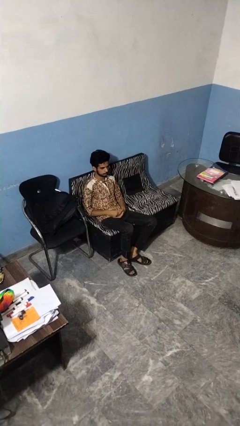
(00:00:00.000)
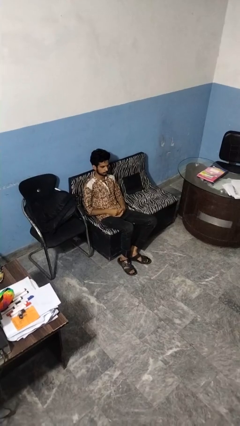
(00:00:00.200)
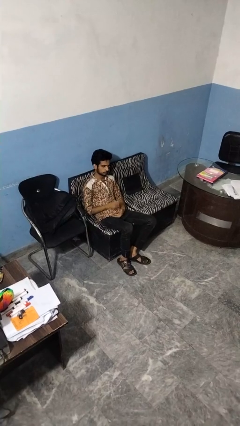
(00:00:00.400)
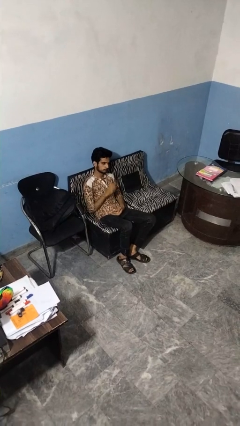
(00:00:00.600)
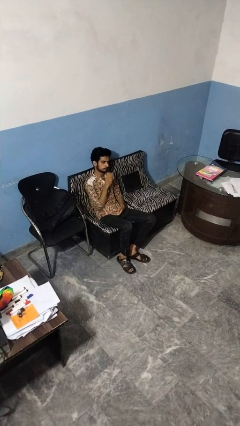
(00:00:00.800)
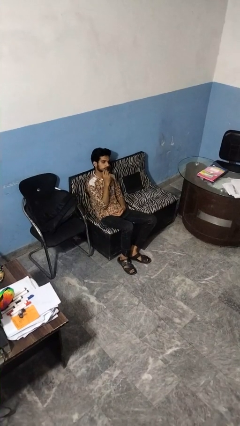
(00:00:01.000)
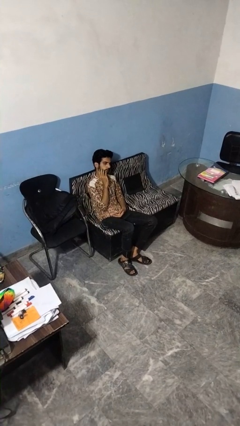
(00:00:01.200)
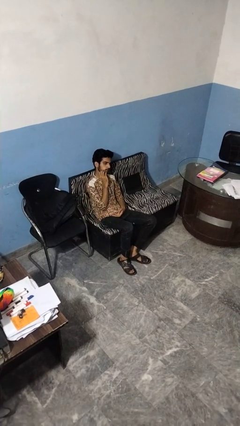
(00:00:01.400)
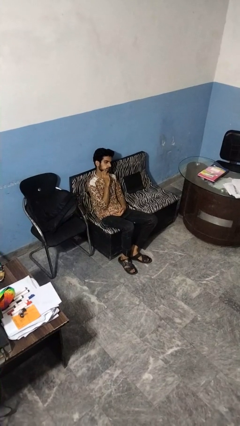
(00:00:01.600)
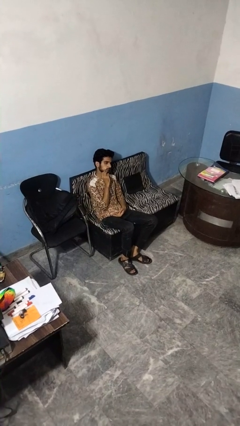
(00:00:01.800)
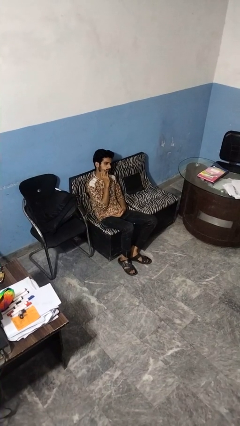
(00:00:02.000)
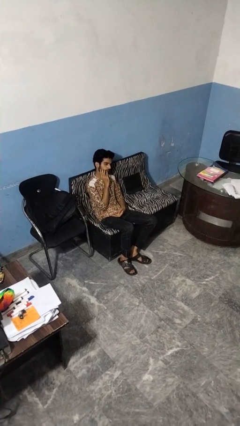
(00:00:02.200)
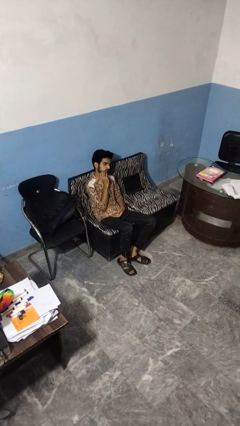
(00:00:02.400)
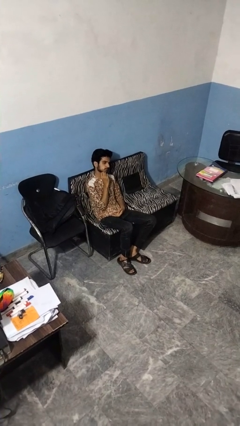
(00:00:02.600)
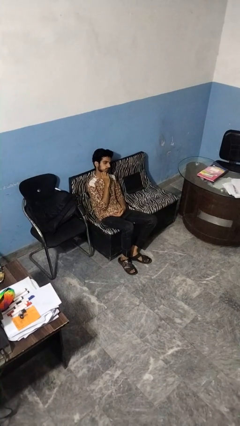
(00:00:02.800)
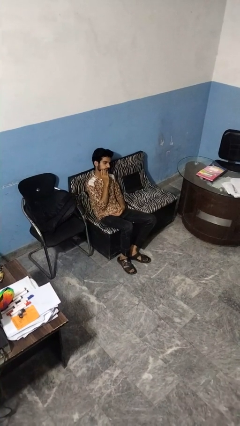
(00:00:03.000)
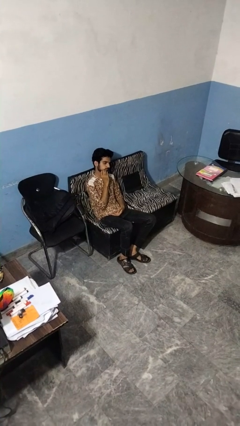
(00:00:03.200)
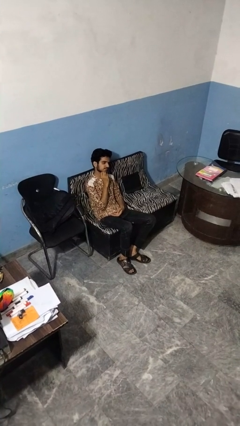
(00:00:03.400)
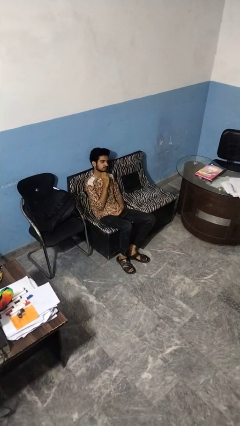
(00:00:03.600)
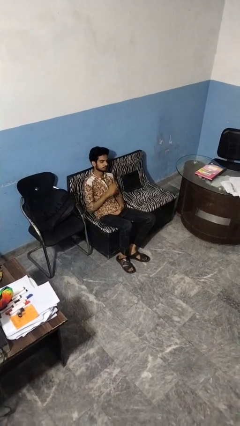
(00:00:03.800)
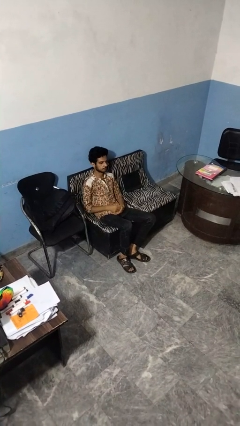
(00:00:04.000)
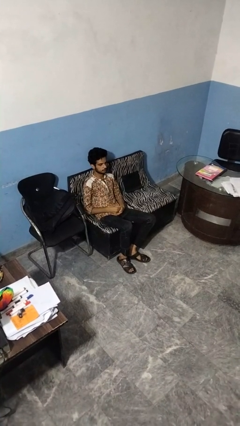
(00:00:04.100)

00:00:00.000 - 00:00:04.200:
person strokes chin

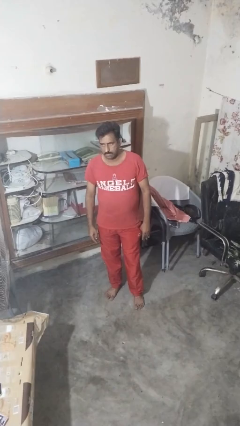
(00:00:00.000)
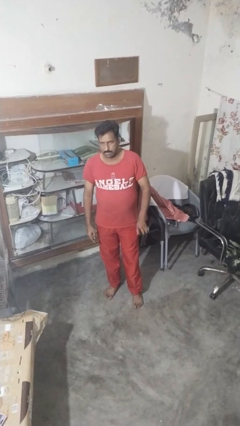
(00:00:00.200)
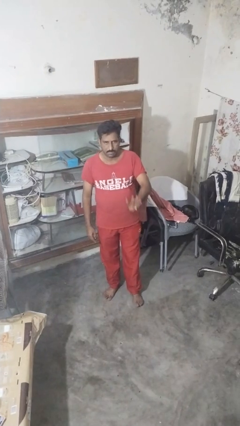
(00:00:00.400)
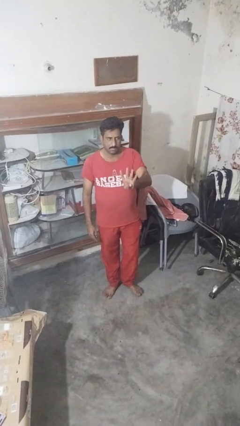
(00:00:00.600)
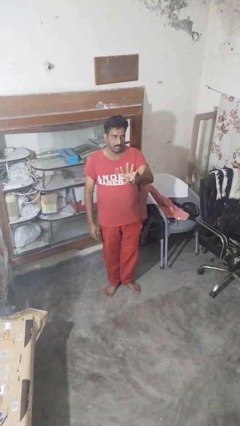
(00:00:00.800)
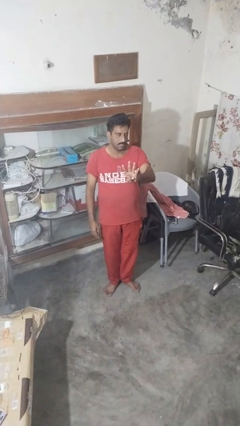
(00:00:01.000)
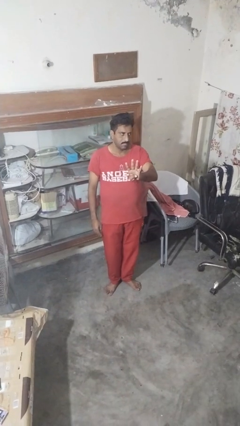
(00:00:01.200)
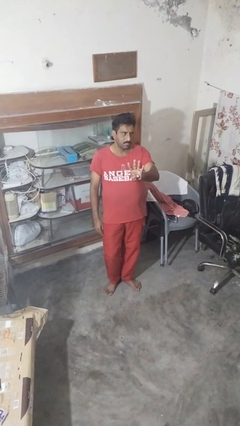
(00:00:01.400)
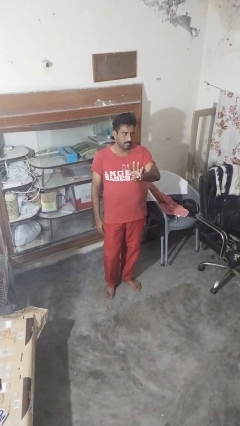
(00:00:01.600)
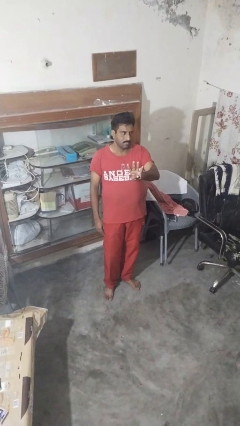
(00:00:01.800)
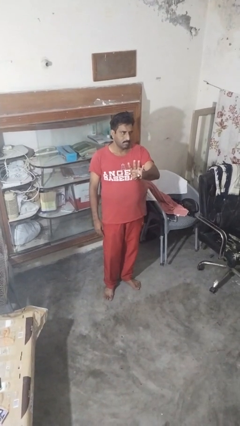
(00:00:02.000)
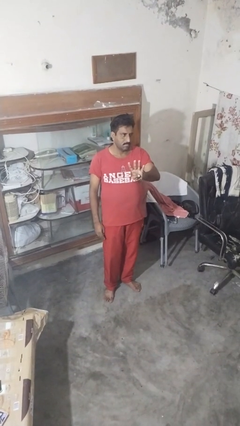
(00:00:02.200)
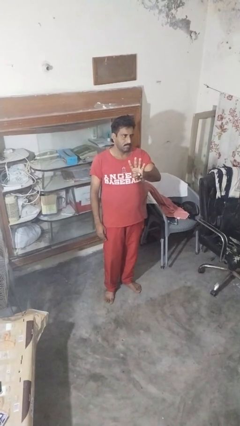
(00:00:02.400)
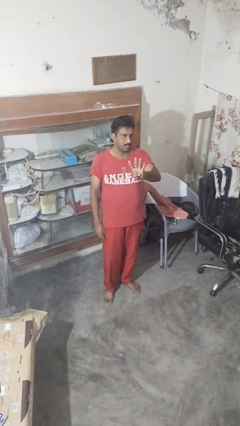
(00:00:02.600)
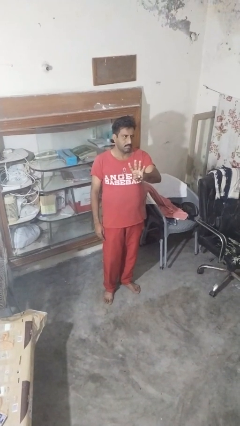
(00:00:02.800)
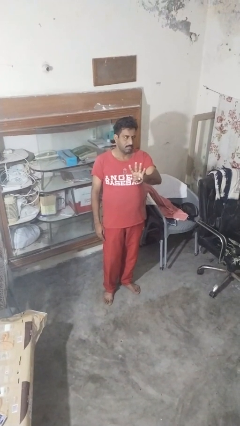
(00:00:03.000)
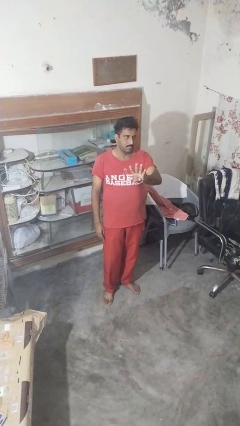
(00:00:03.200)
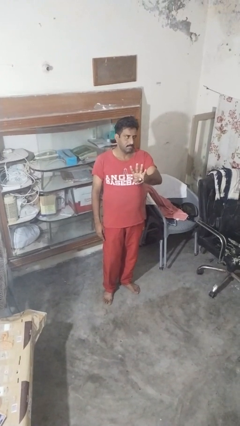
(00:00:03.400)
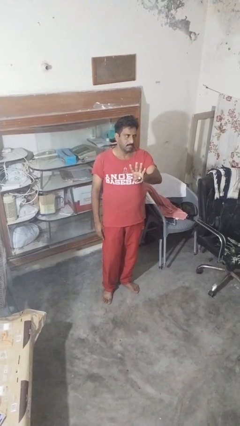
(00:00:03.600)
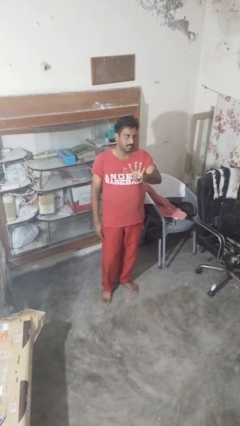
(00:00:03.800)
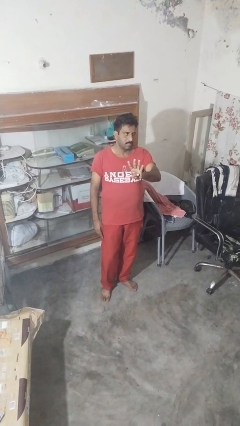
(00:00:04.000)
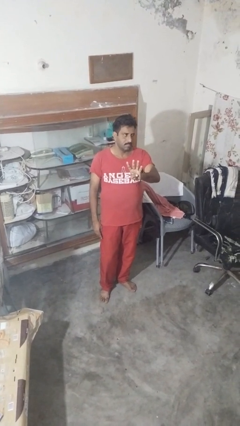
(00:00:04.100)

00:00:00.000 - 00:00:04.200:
person gestures number four

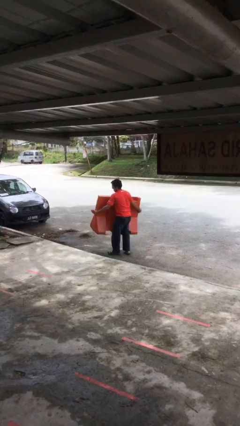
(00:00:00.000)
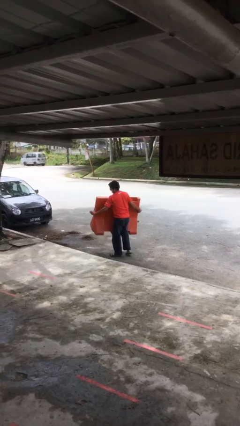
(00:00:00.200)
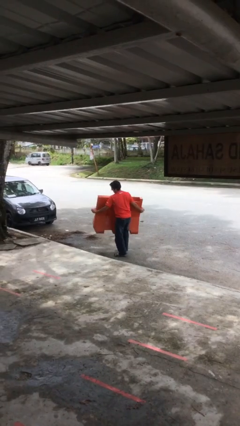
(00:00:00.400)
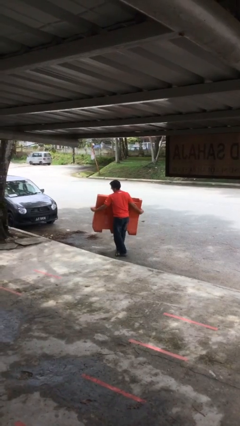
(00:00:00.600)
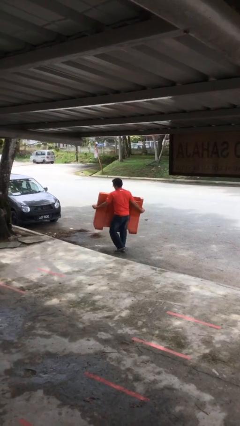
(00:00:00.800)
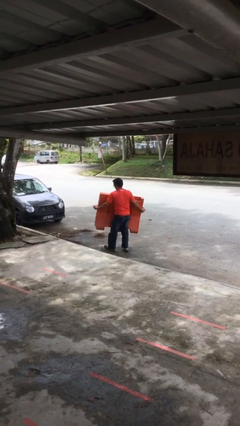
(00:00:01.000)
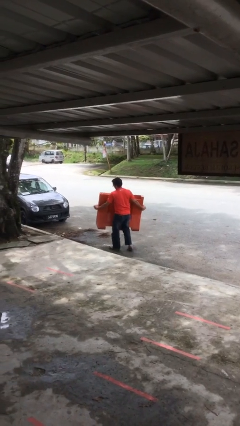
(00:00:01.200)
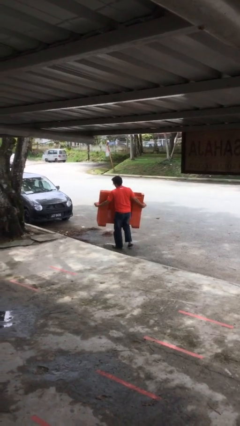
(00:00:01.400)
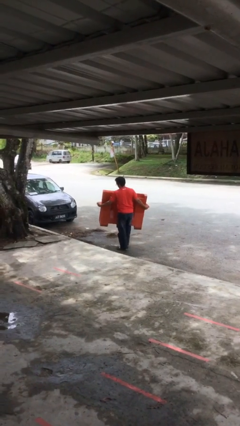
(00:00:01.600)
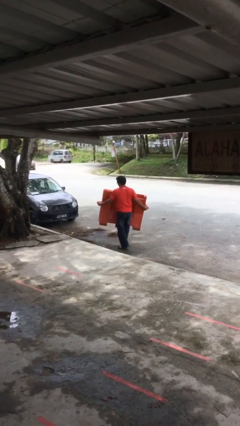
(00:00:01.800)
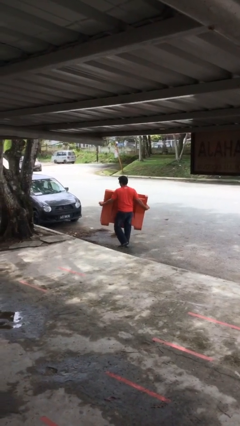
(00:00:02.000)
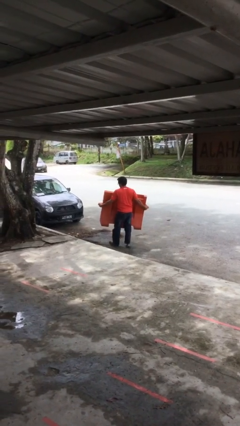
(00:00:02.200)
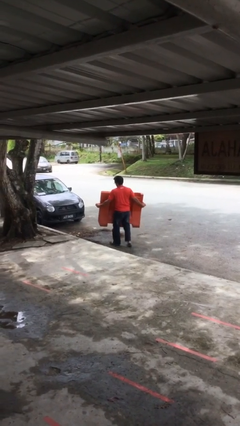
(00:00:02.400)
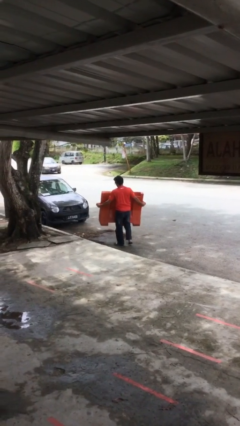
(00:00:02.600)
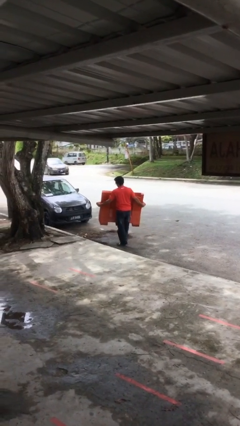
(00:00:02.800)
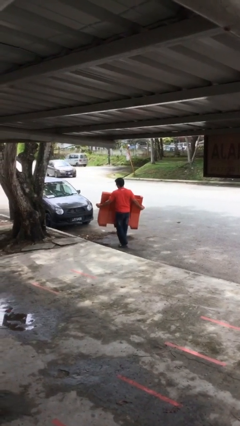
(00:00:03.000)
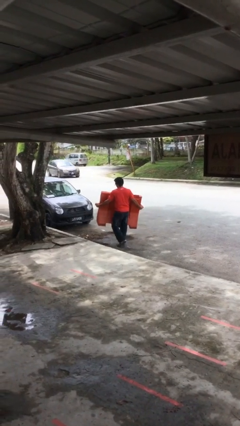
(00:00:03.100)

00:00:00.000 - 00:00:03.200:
person carries heavy object

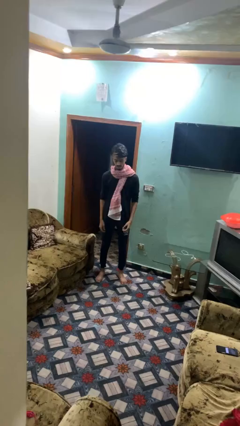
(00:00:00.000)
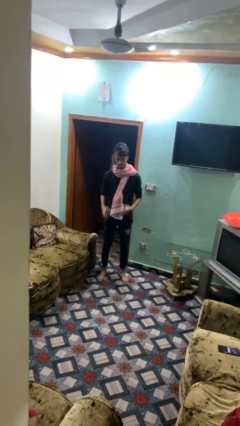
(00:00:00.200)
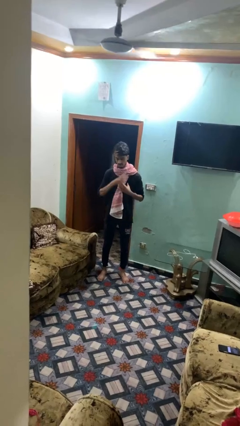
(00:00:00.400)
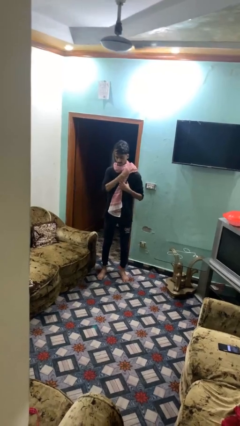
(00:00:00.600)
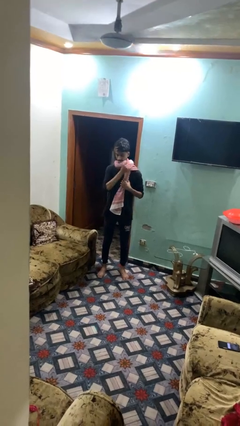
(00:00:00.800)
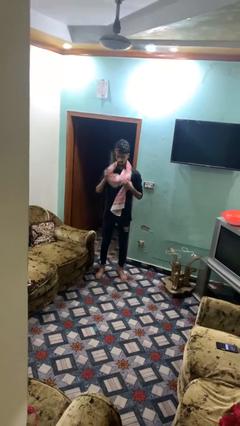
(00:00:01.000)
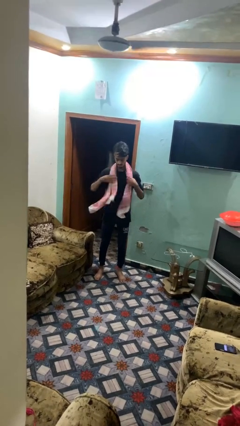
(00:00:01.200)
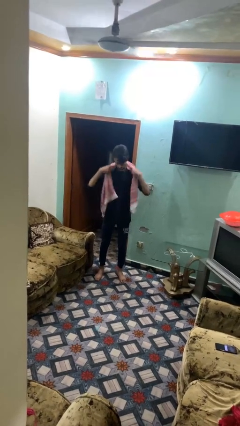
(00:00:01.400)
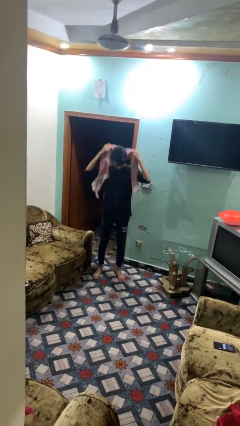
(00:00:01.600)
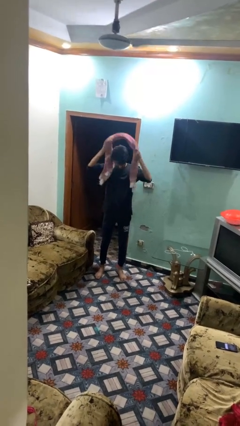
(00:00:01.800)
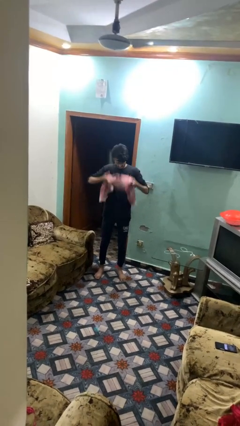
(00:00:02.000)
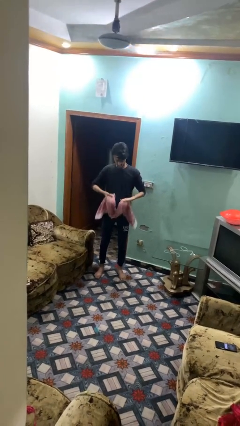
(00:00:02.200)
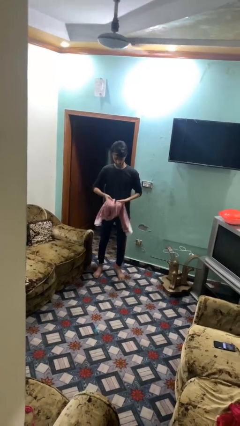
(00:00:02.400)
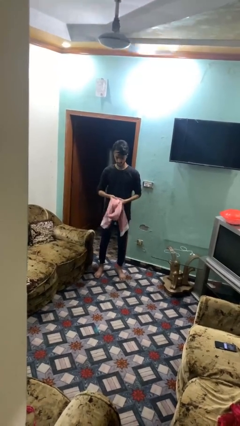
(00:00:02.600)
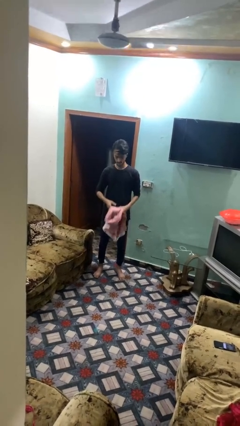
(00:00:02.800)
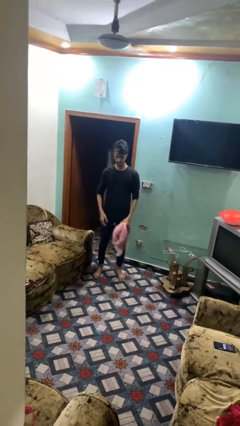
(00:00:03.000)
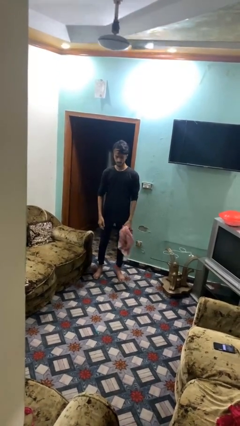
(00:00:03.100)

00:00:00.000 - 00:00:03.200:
person takes off scarf

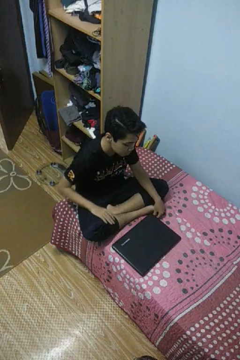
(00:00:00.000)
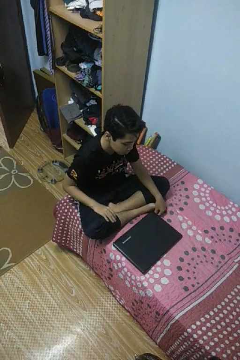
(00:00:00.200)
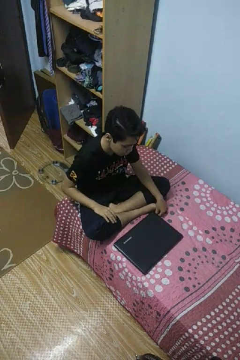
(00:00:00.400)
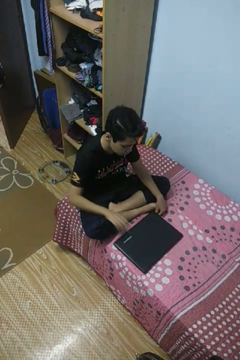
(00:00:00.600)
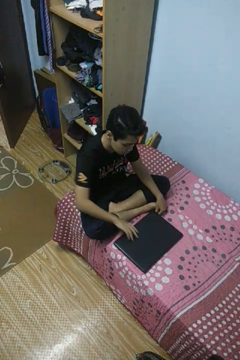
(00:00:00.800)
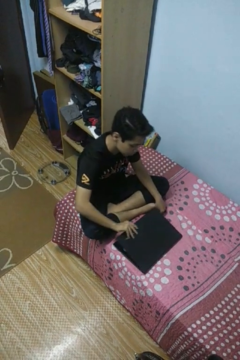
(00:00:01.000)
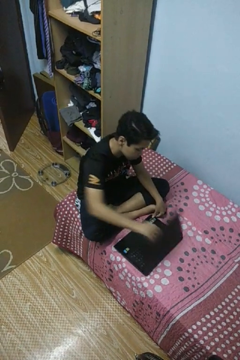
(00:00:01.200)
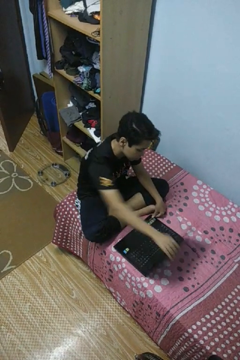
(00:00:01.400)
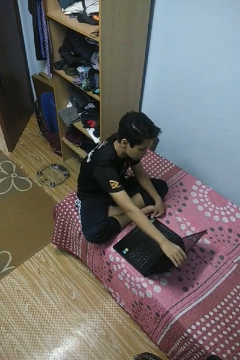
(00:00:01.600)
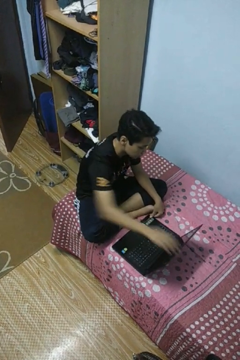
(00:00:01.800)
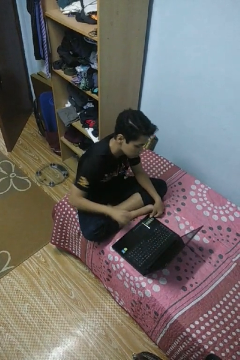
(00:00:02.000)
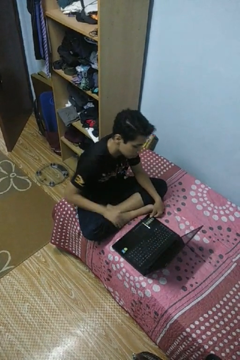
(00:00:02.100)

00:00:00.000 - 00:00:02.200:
person opens laptop

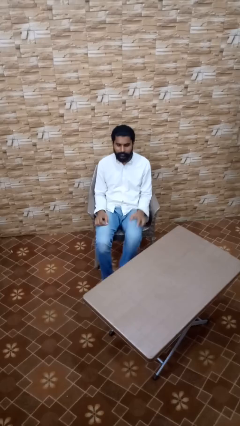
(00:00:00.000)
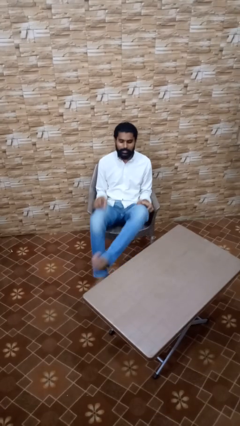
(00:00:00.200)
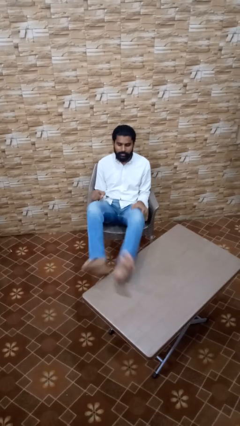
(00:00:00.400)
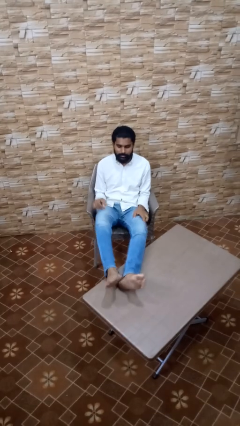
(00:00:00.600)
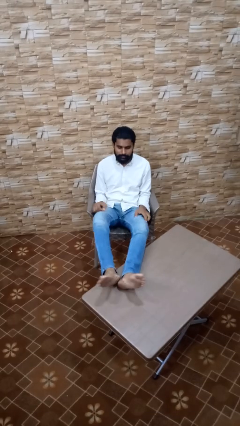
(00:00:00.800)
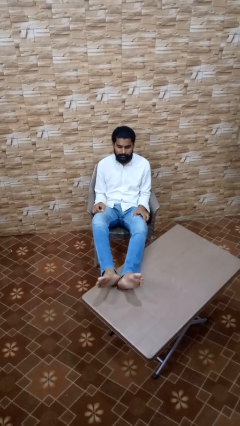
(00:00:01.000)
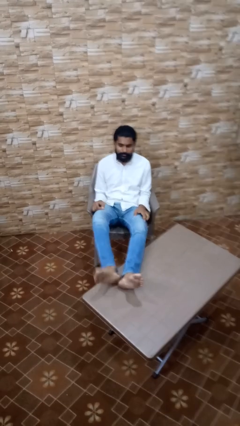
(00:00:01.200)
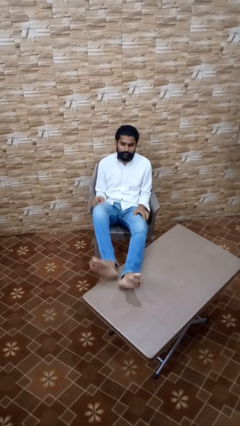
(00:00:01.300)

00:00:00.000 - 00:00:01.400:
person puts feet up
